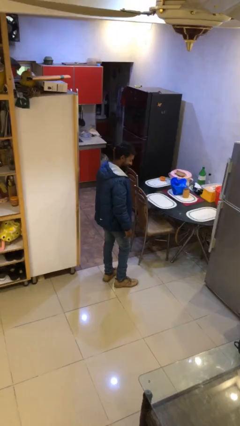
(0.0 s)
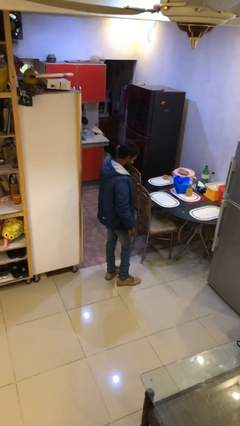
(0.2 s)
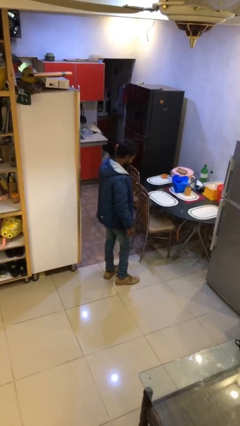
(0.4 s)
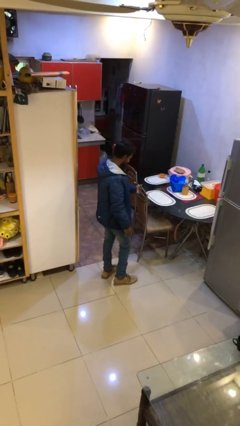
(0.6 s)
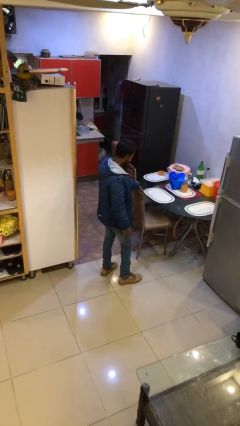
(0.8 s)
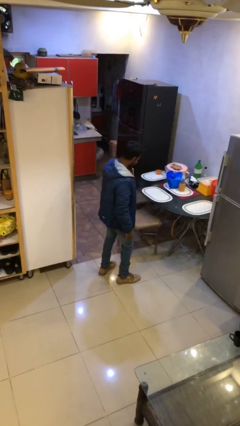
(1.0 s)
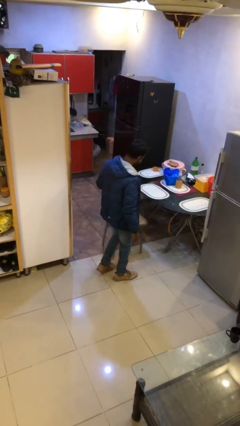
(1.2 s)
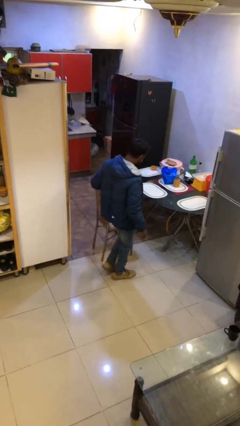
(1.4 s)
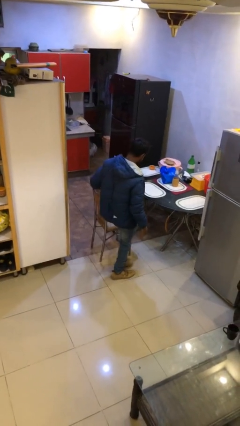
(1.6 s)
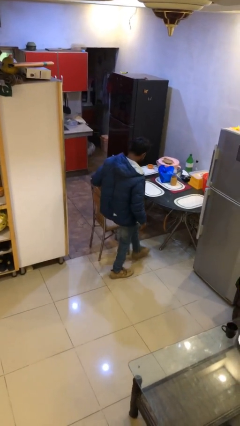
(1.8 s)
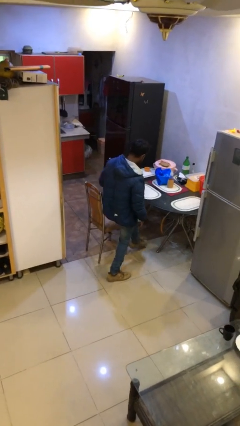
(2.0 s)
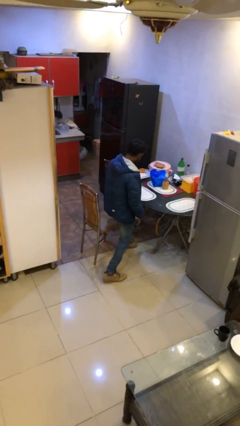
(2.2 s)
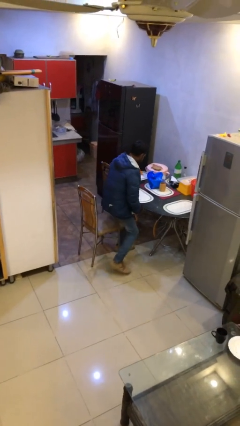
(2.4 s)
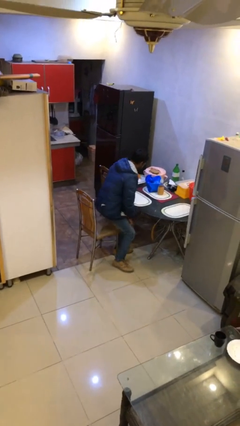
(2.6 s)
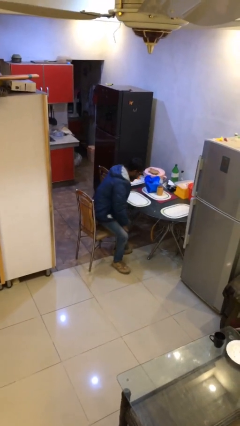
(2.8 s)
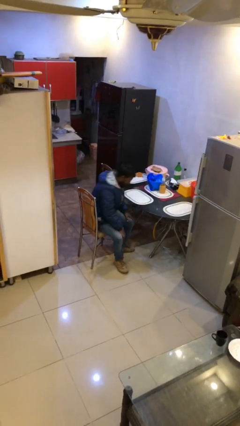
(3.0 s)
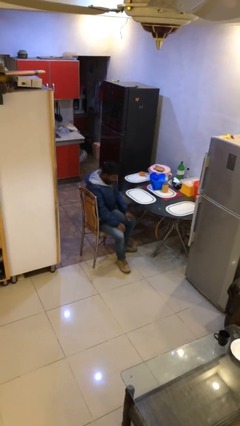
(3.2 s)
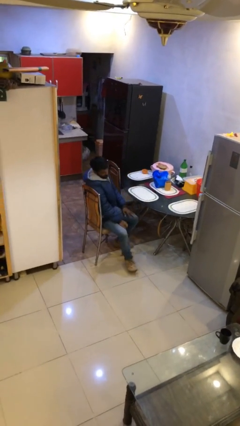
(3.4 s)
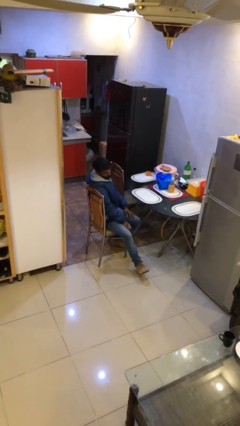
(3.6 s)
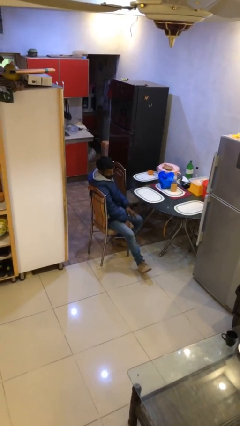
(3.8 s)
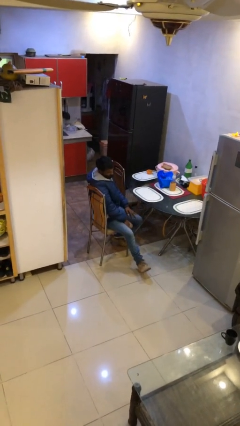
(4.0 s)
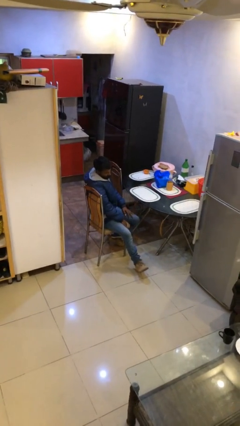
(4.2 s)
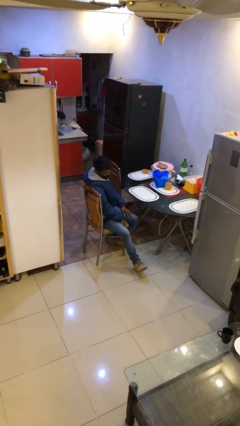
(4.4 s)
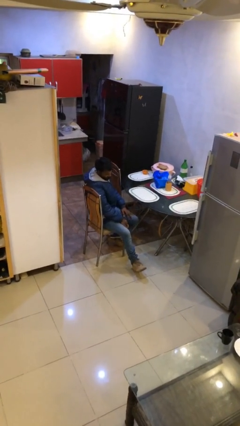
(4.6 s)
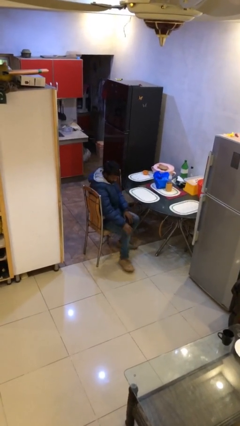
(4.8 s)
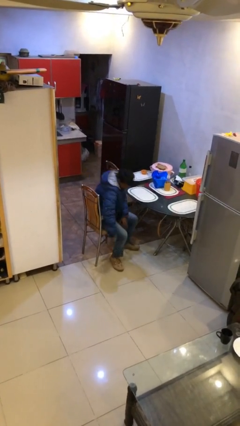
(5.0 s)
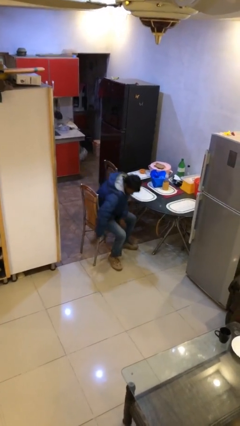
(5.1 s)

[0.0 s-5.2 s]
person sits down

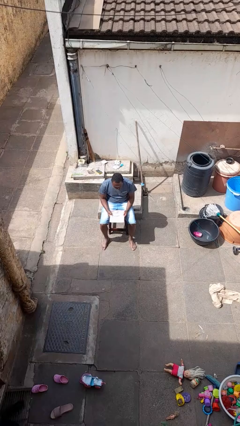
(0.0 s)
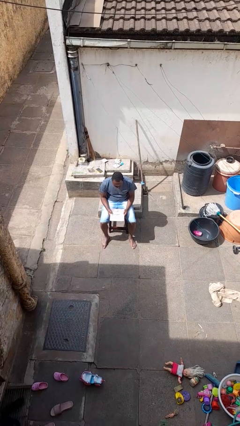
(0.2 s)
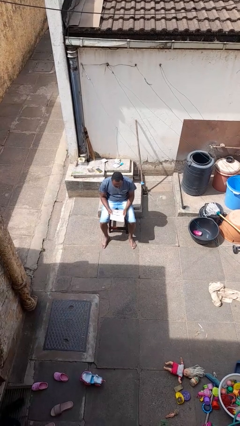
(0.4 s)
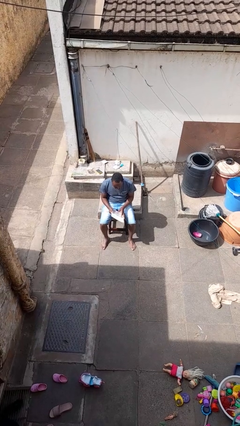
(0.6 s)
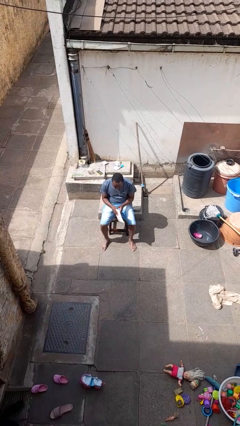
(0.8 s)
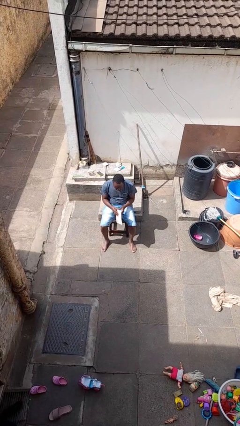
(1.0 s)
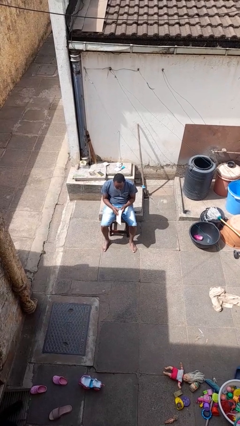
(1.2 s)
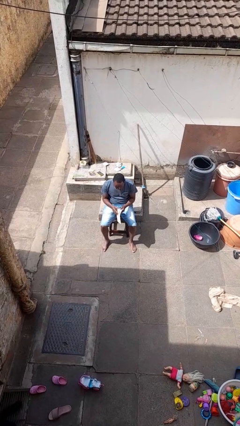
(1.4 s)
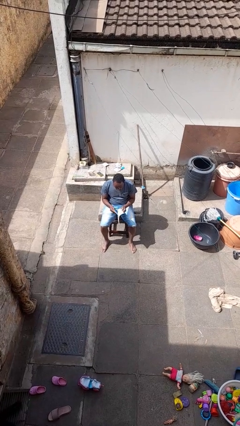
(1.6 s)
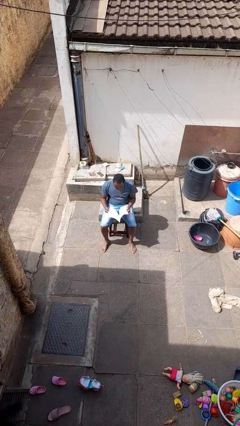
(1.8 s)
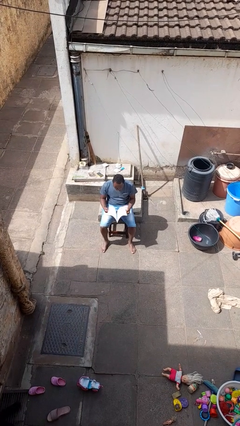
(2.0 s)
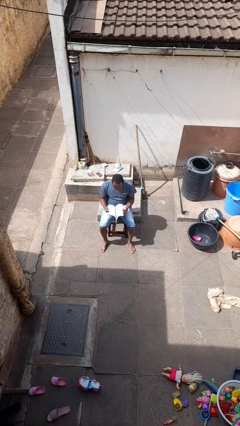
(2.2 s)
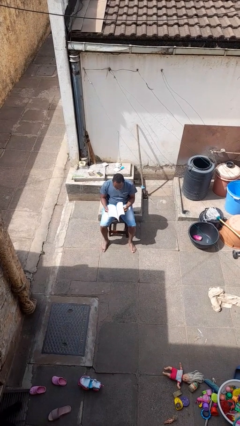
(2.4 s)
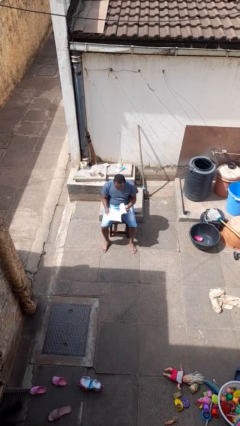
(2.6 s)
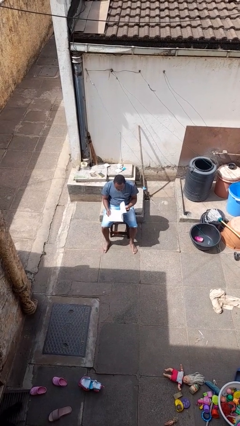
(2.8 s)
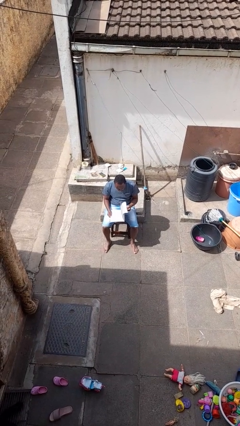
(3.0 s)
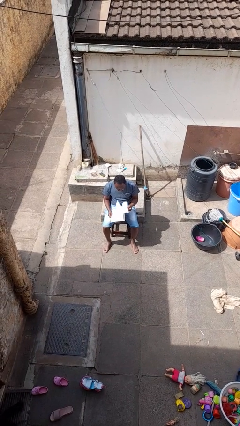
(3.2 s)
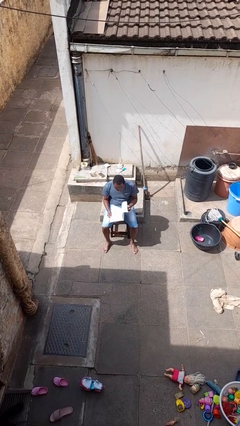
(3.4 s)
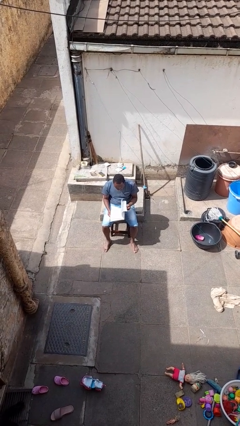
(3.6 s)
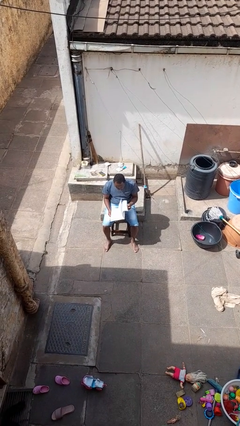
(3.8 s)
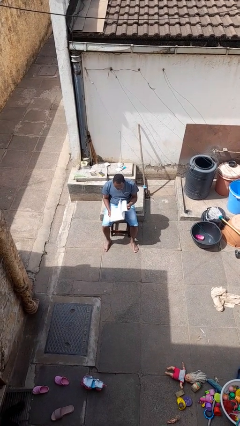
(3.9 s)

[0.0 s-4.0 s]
person reads magazine

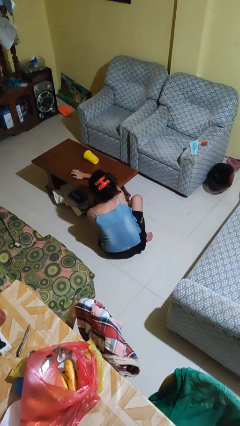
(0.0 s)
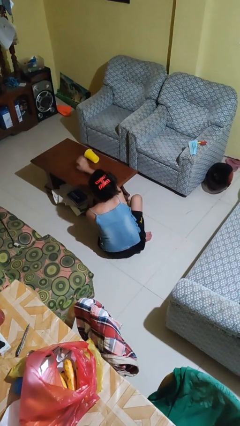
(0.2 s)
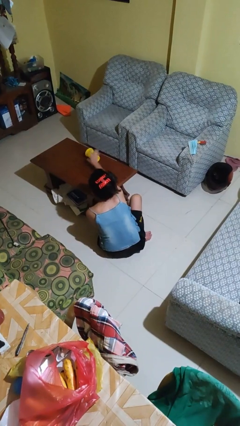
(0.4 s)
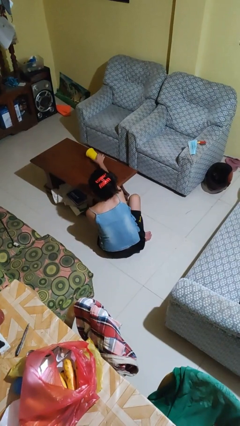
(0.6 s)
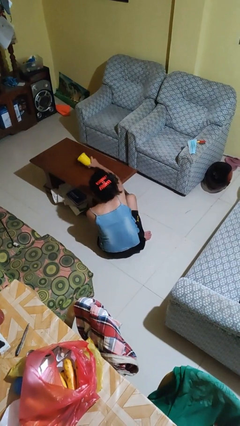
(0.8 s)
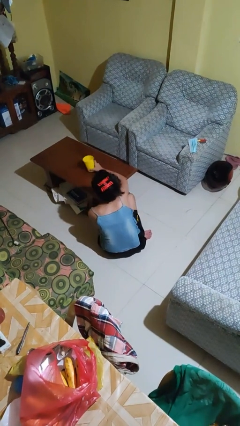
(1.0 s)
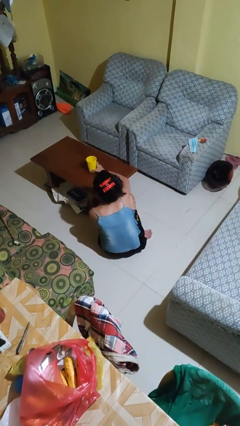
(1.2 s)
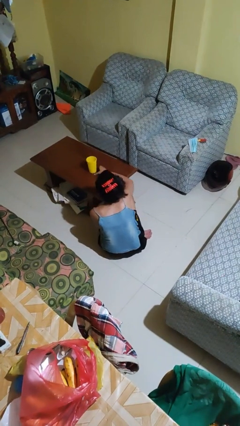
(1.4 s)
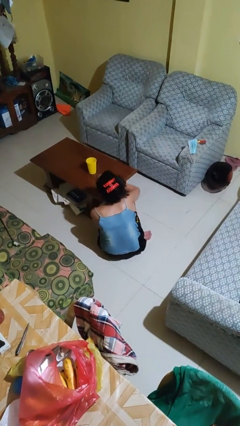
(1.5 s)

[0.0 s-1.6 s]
person sets upright glass

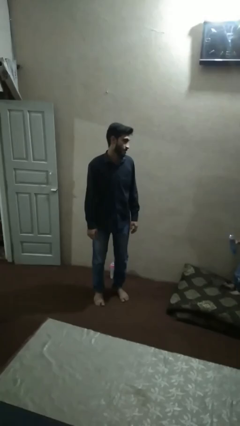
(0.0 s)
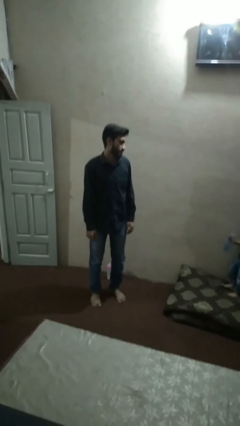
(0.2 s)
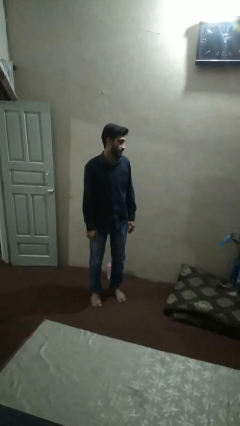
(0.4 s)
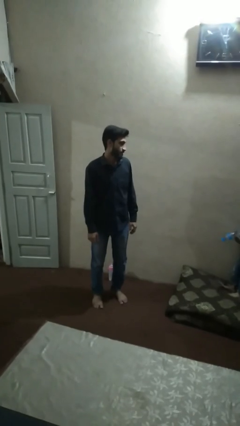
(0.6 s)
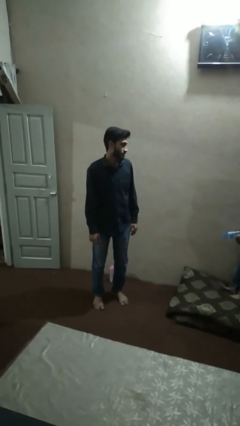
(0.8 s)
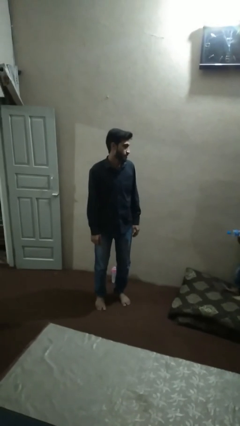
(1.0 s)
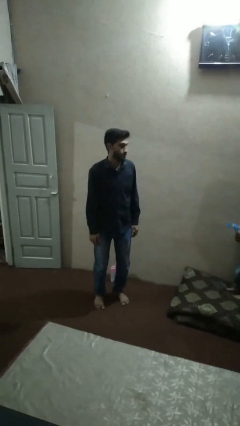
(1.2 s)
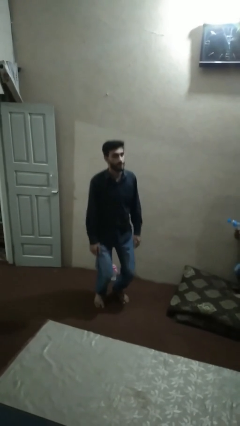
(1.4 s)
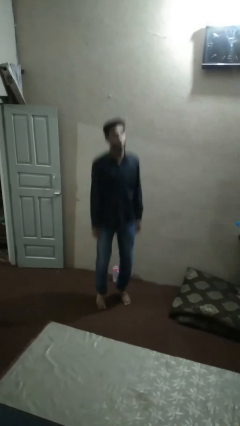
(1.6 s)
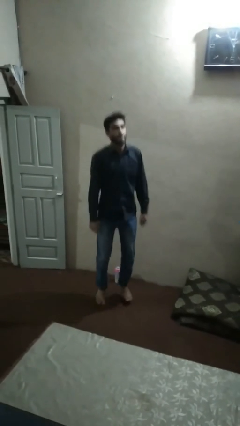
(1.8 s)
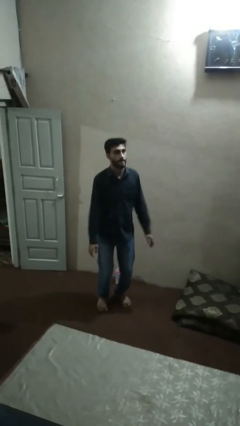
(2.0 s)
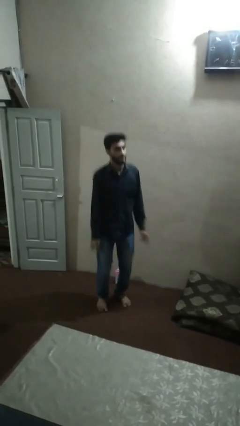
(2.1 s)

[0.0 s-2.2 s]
person jumps

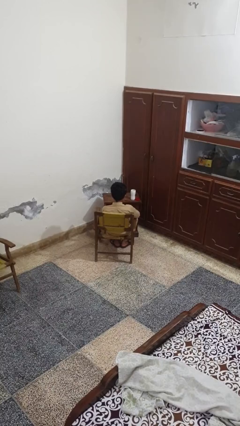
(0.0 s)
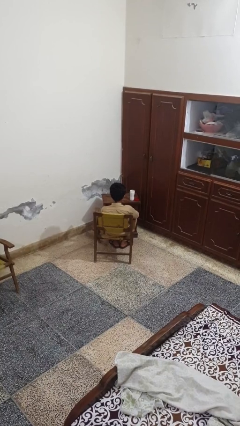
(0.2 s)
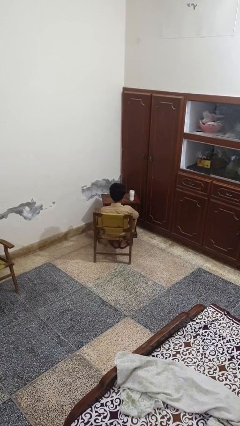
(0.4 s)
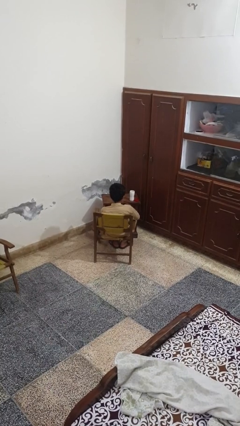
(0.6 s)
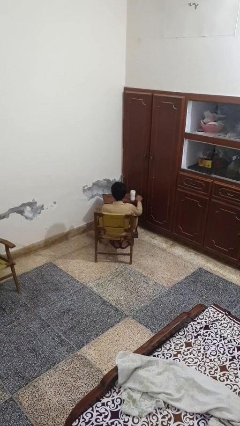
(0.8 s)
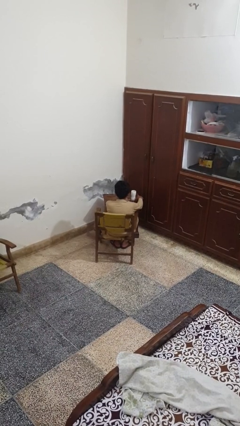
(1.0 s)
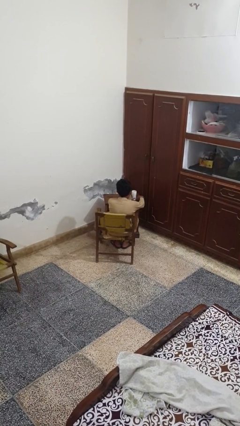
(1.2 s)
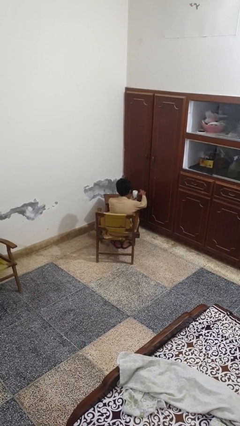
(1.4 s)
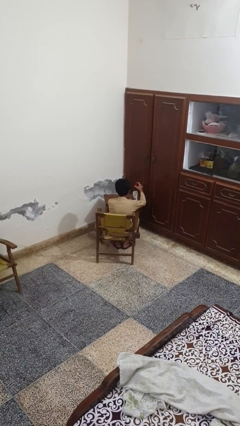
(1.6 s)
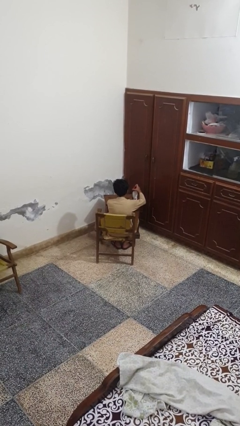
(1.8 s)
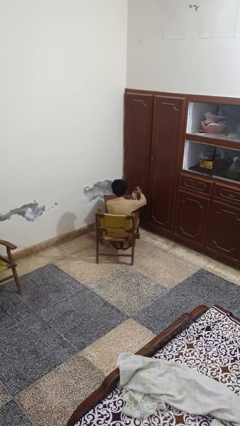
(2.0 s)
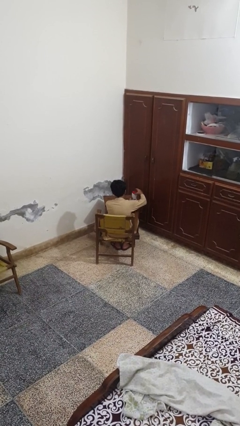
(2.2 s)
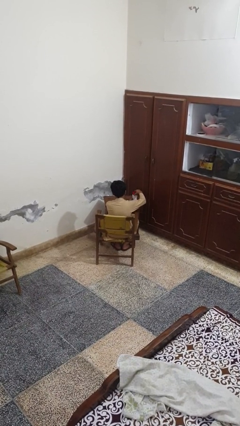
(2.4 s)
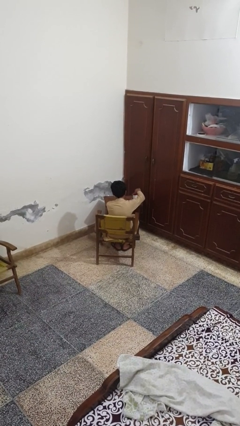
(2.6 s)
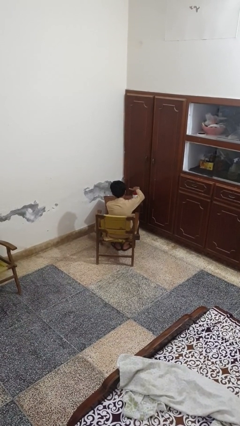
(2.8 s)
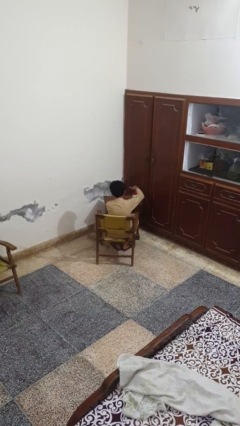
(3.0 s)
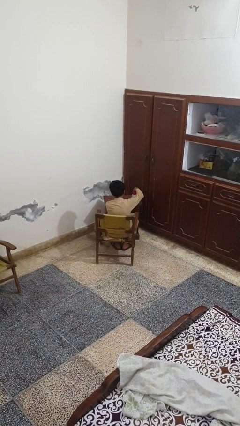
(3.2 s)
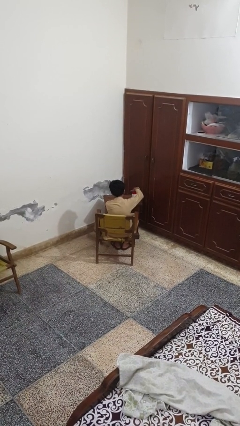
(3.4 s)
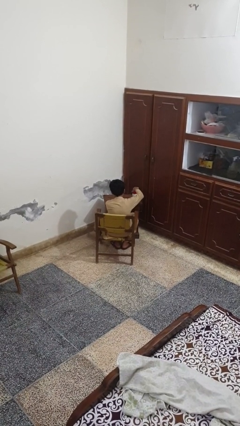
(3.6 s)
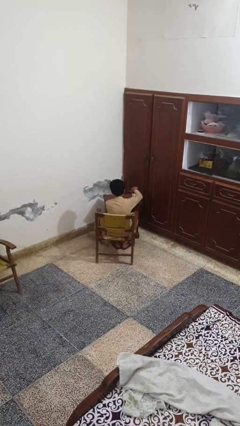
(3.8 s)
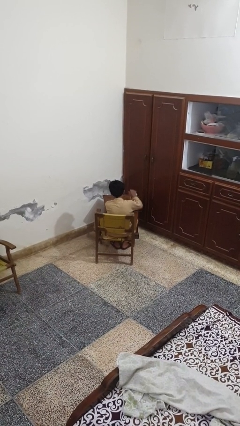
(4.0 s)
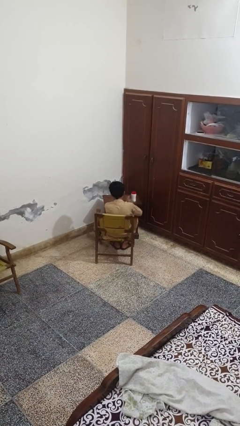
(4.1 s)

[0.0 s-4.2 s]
person closes jar

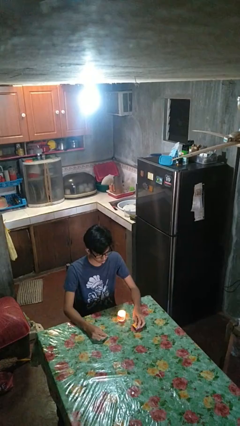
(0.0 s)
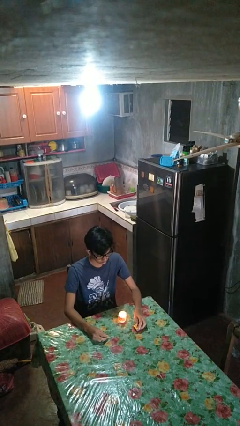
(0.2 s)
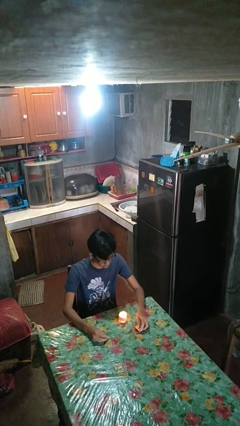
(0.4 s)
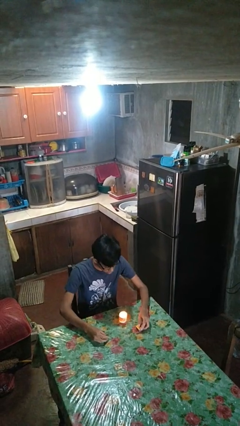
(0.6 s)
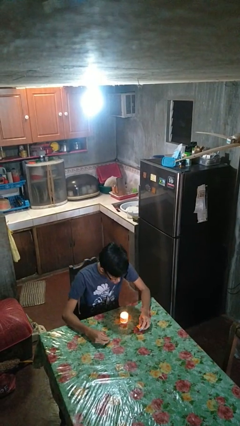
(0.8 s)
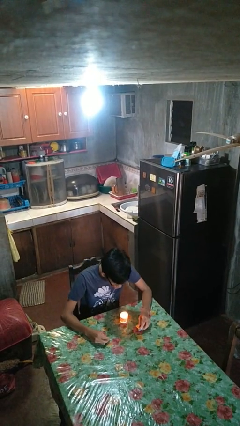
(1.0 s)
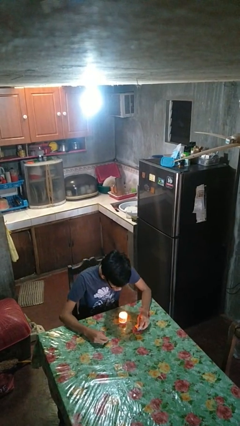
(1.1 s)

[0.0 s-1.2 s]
person extinguishes candle
